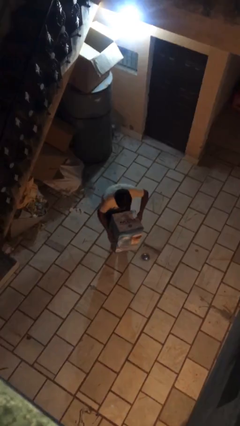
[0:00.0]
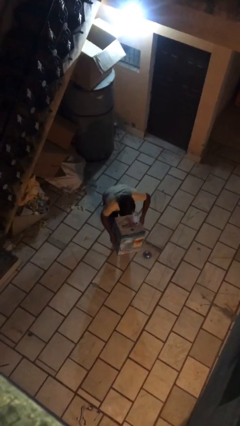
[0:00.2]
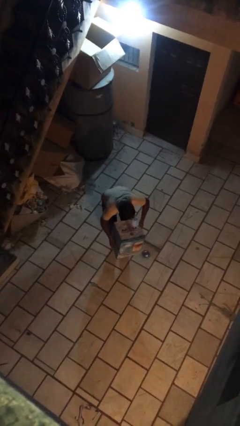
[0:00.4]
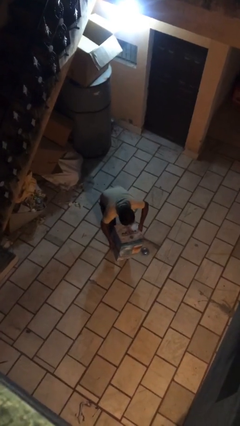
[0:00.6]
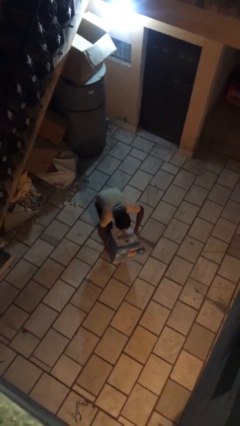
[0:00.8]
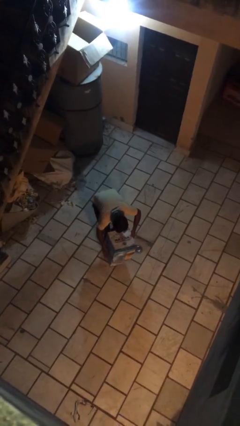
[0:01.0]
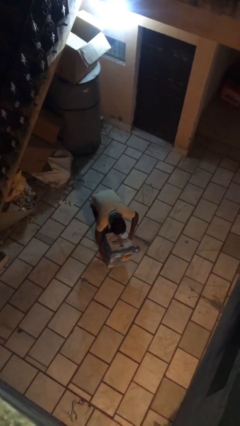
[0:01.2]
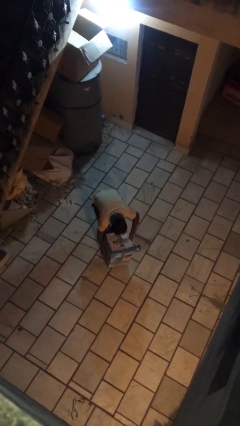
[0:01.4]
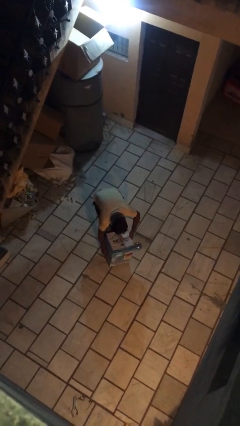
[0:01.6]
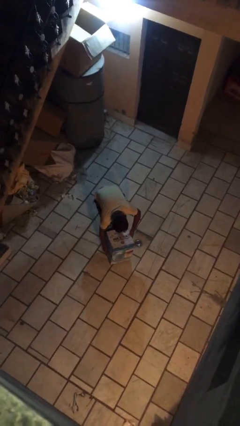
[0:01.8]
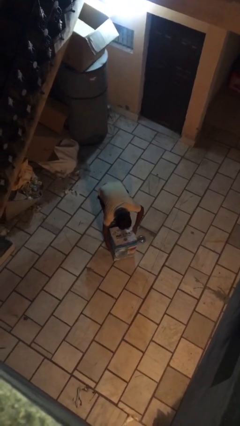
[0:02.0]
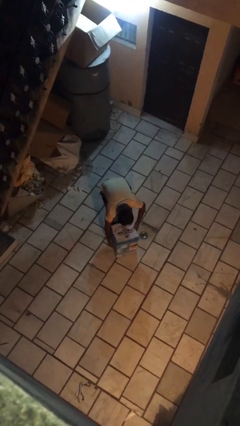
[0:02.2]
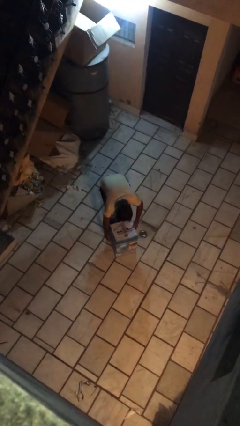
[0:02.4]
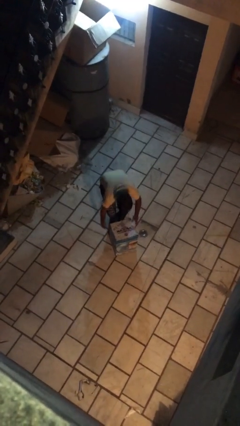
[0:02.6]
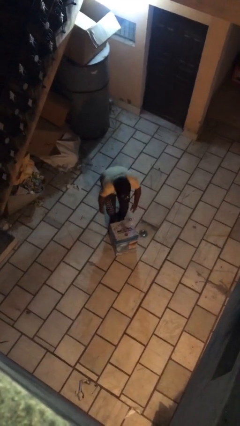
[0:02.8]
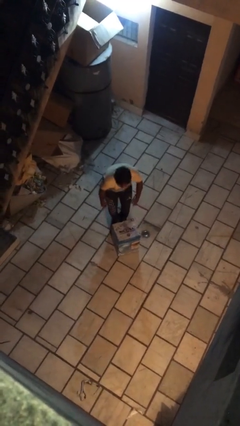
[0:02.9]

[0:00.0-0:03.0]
person puts down object on floor

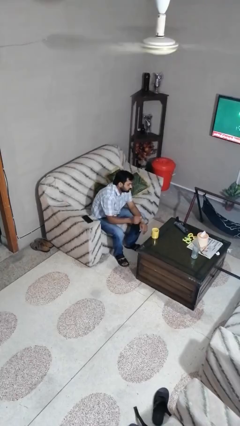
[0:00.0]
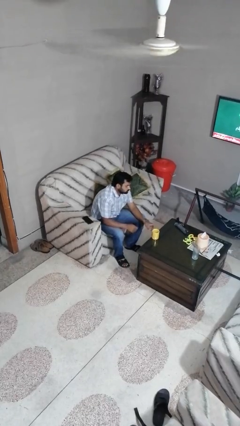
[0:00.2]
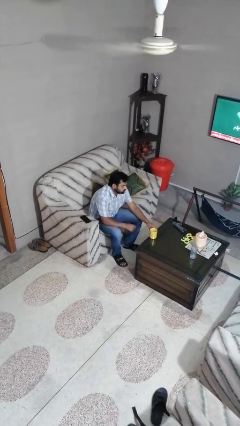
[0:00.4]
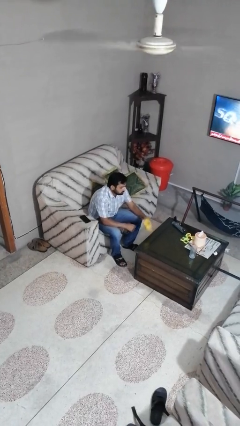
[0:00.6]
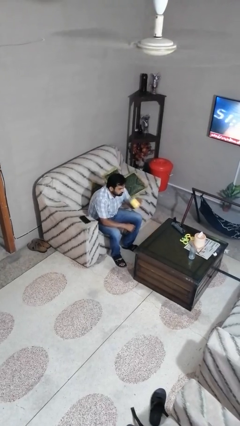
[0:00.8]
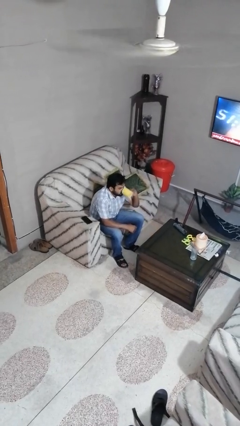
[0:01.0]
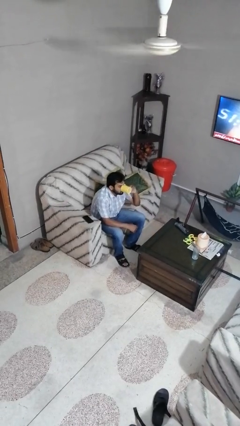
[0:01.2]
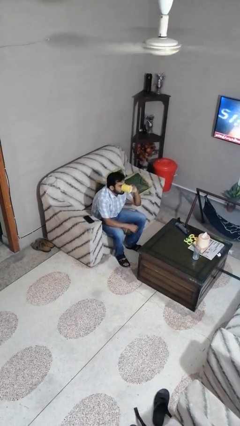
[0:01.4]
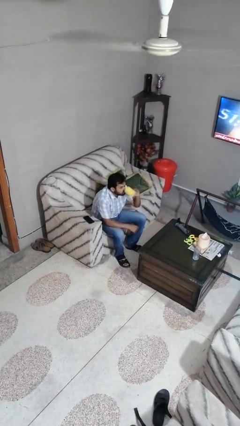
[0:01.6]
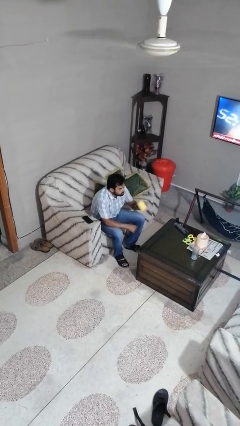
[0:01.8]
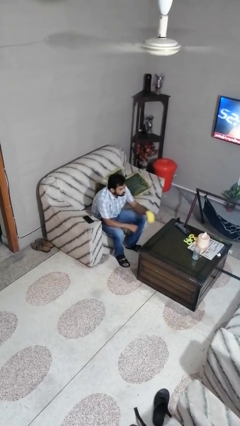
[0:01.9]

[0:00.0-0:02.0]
person drinks from mug

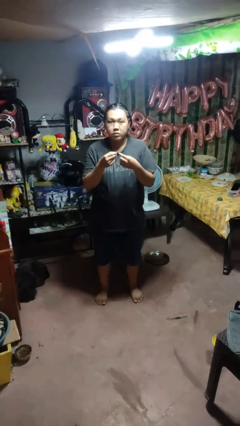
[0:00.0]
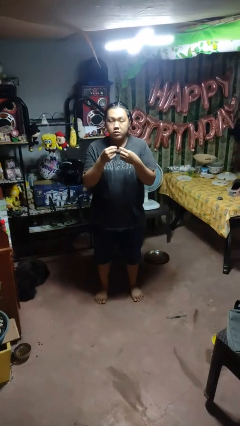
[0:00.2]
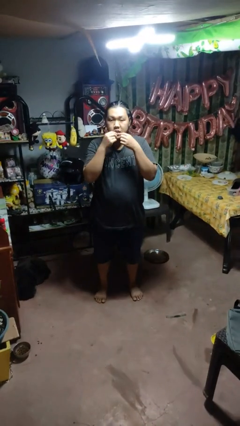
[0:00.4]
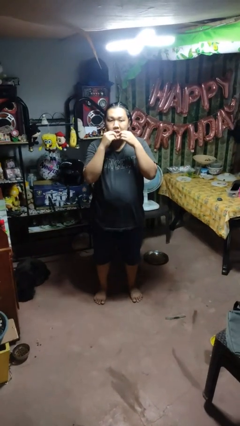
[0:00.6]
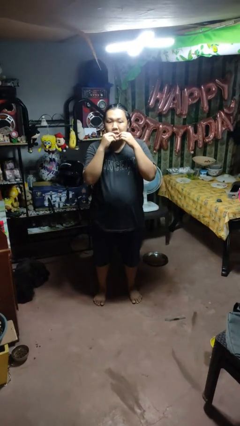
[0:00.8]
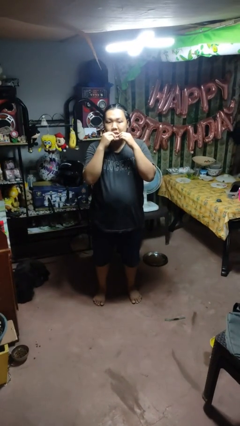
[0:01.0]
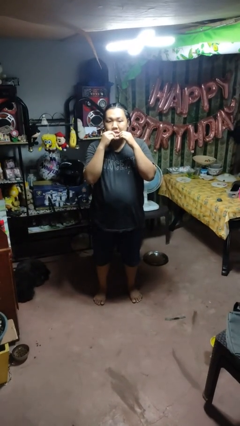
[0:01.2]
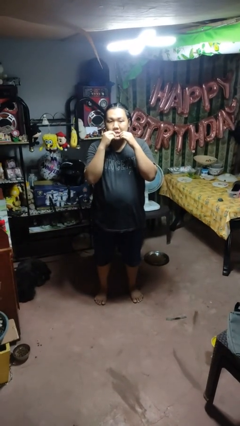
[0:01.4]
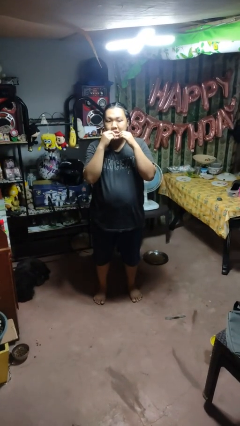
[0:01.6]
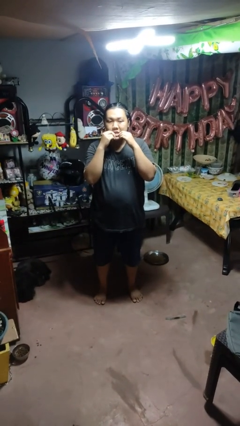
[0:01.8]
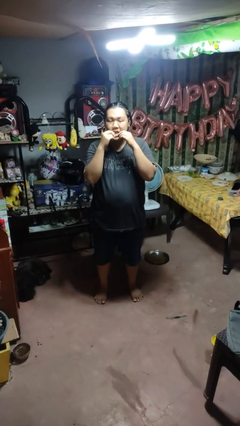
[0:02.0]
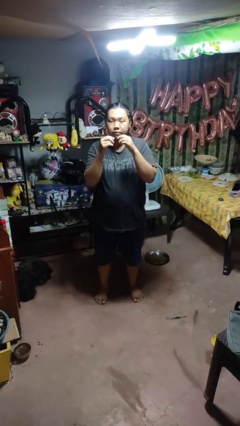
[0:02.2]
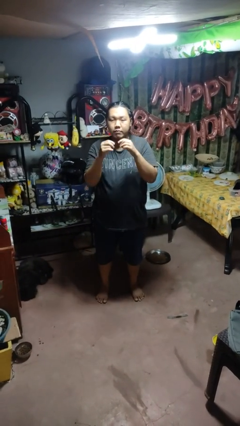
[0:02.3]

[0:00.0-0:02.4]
person flosses

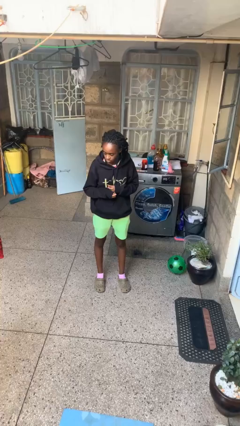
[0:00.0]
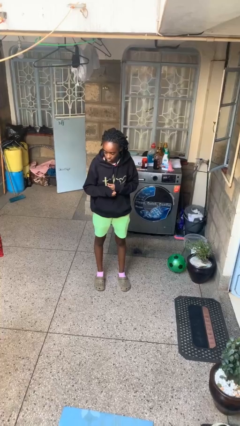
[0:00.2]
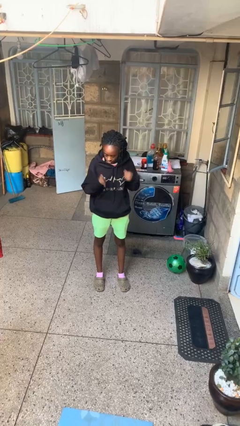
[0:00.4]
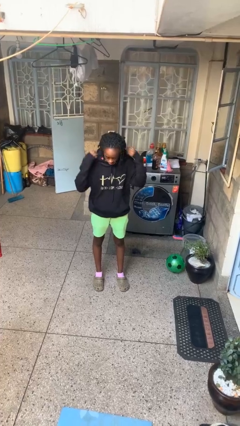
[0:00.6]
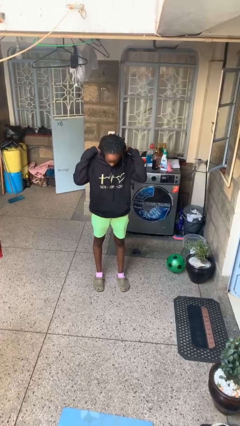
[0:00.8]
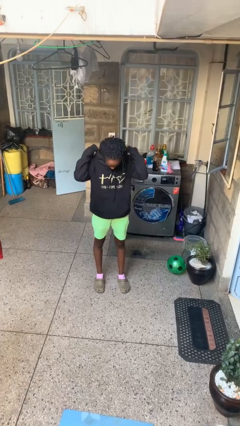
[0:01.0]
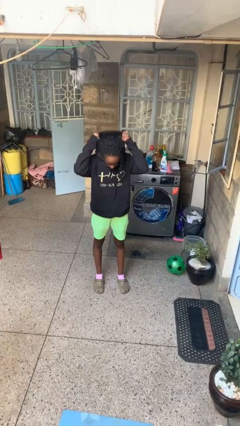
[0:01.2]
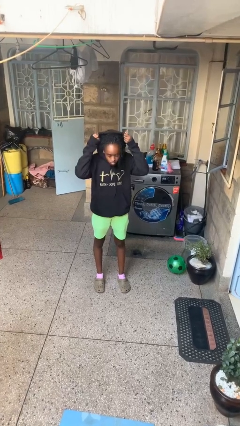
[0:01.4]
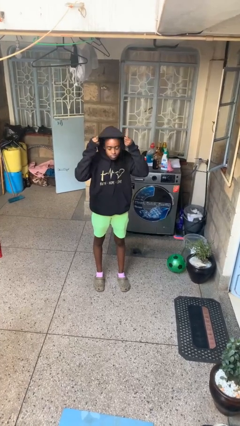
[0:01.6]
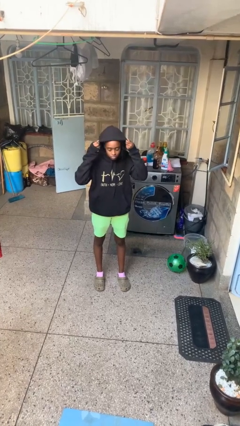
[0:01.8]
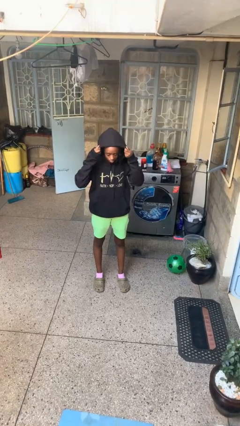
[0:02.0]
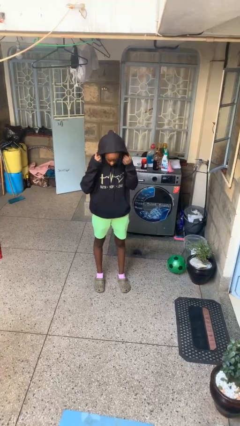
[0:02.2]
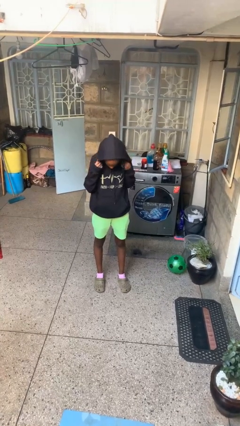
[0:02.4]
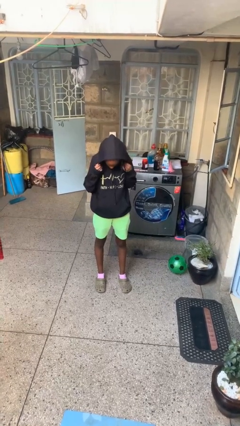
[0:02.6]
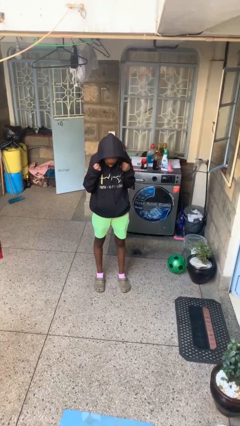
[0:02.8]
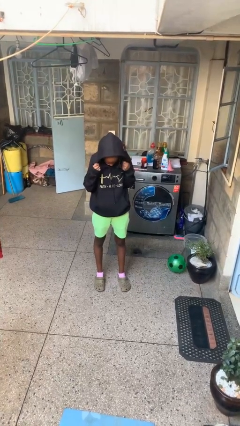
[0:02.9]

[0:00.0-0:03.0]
person puts on hoodie

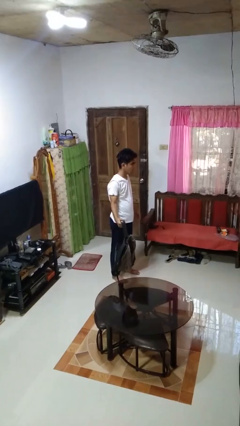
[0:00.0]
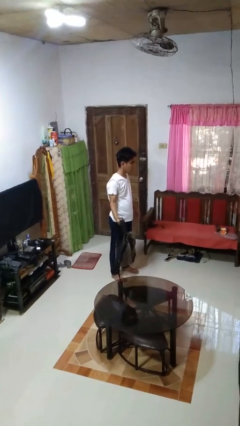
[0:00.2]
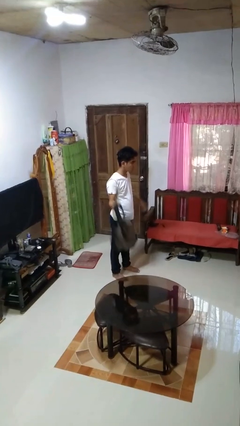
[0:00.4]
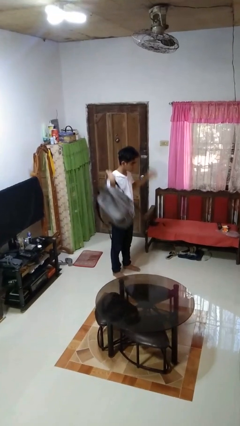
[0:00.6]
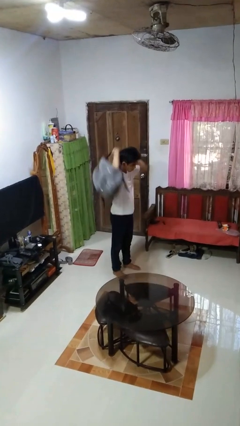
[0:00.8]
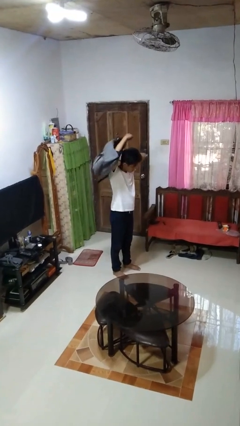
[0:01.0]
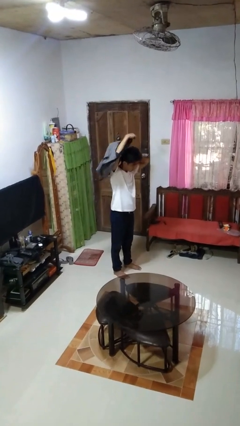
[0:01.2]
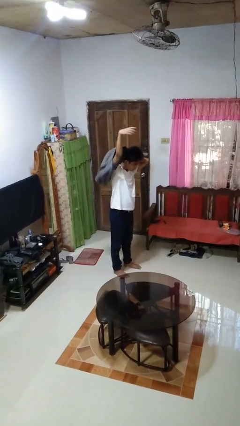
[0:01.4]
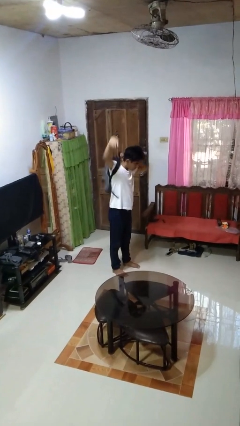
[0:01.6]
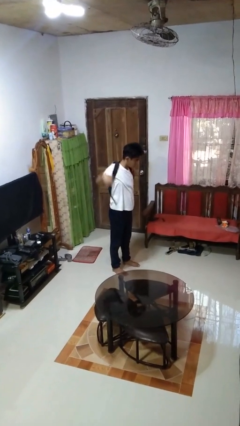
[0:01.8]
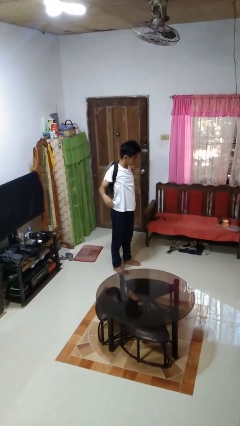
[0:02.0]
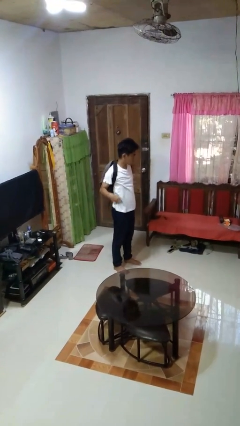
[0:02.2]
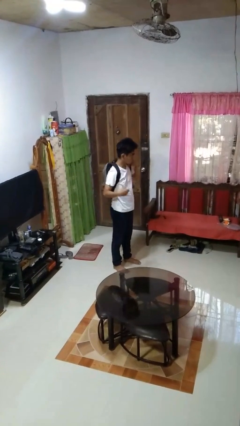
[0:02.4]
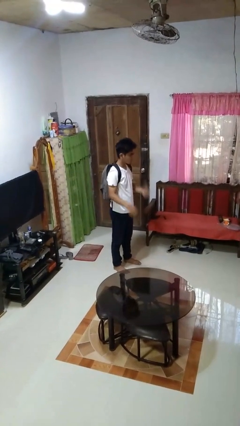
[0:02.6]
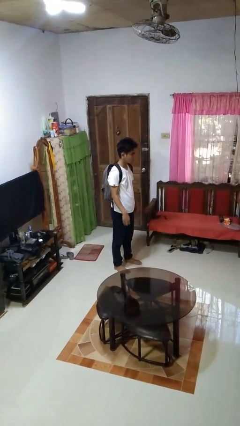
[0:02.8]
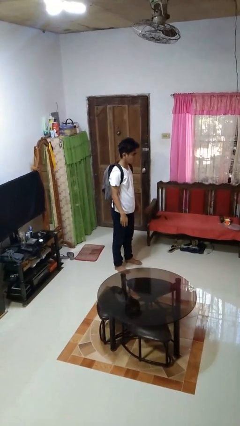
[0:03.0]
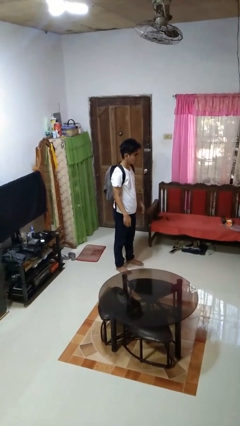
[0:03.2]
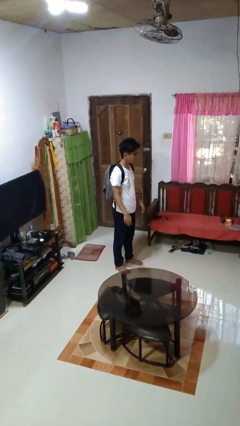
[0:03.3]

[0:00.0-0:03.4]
person puts on backpack

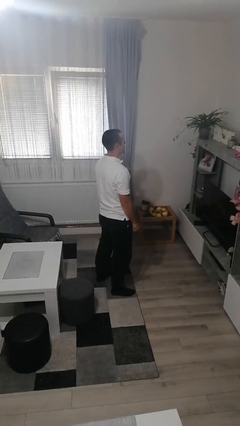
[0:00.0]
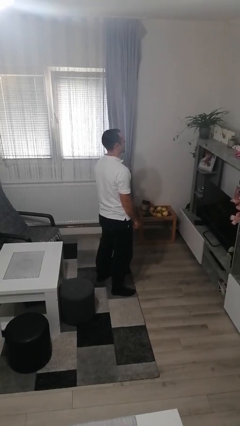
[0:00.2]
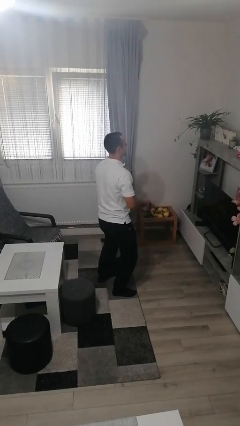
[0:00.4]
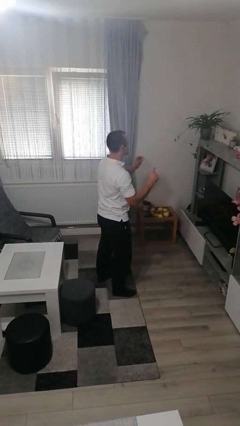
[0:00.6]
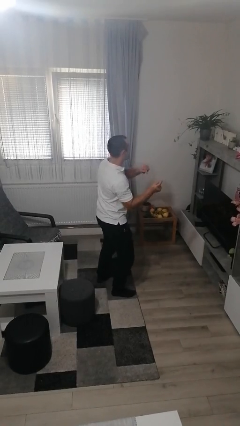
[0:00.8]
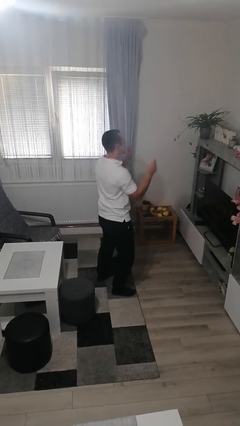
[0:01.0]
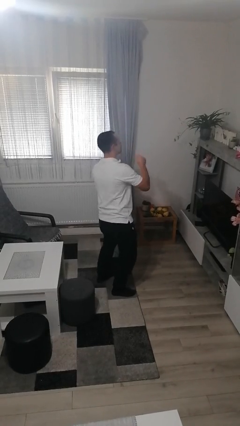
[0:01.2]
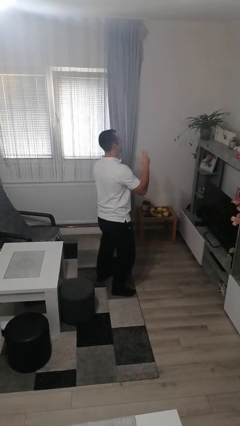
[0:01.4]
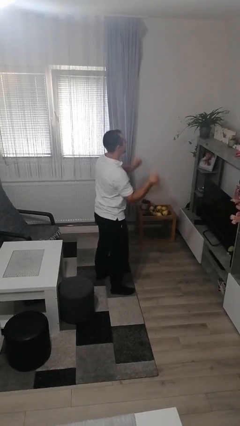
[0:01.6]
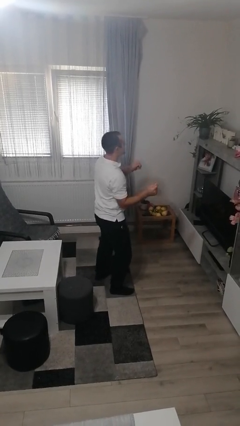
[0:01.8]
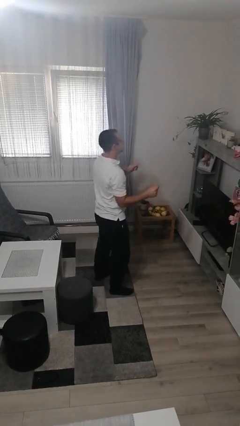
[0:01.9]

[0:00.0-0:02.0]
person dances in place

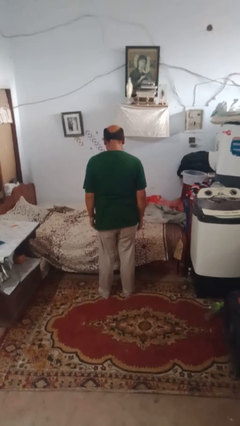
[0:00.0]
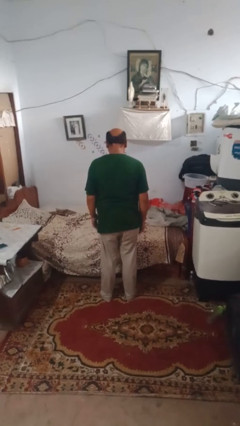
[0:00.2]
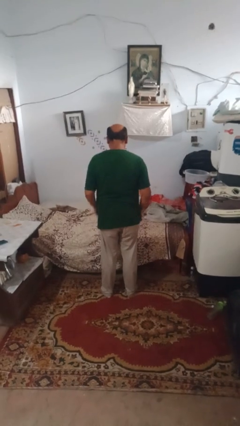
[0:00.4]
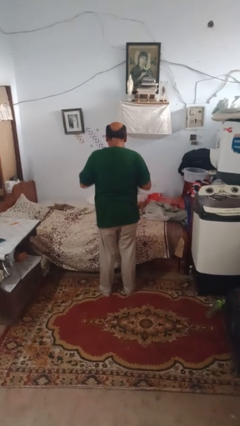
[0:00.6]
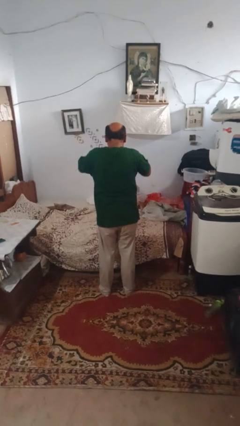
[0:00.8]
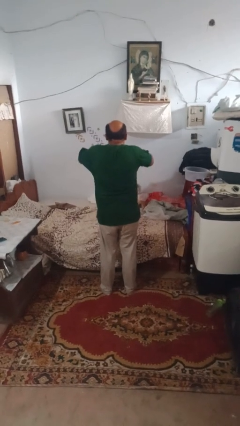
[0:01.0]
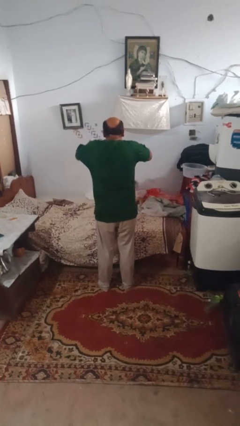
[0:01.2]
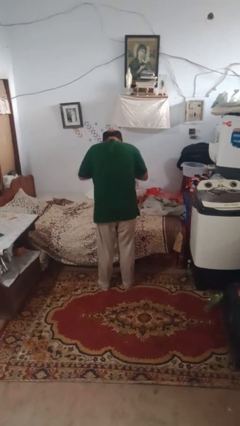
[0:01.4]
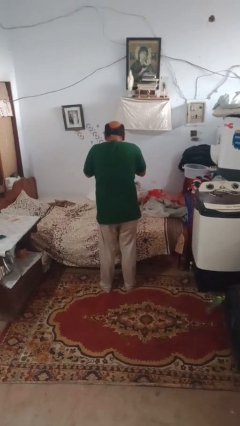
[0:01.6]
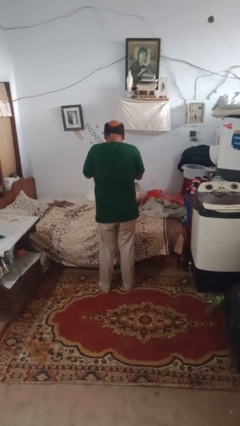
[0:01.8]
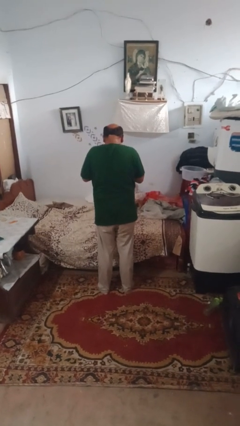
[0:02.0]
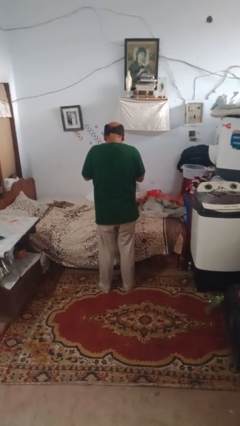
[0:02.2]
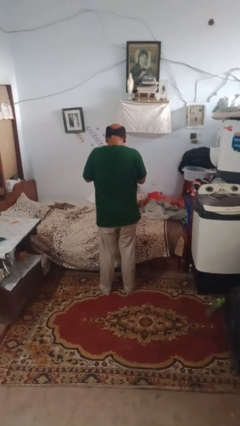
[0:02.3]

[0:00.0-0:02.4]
person sneezes into hand
